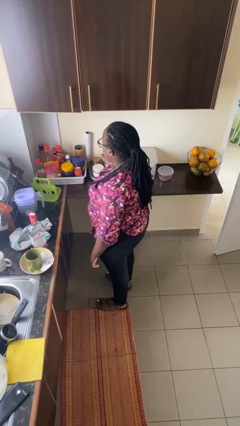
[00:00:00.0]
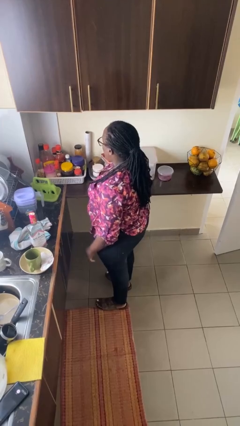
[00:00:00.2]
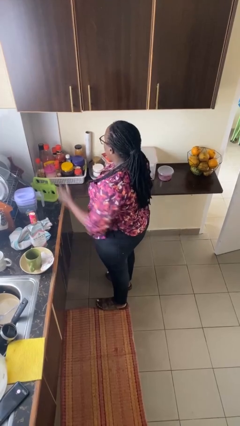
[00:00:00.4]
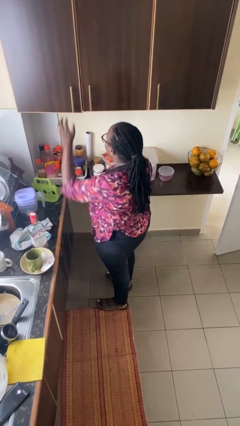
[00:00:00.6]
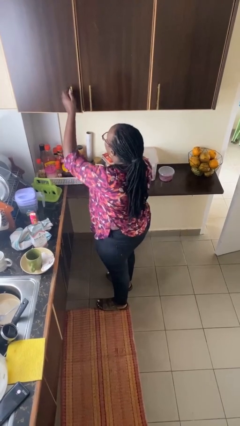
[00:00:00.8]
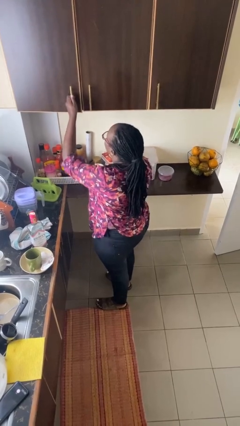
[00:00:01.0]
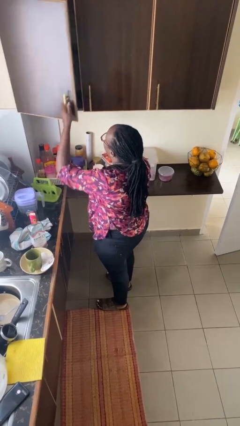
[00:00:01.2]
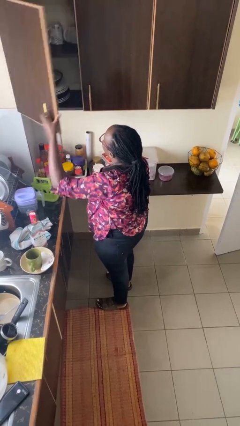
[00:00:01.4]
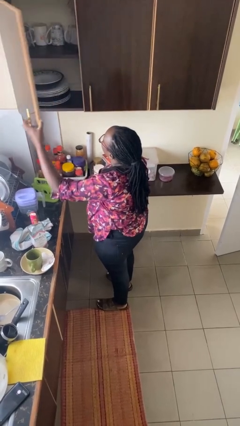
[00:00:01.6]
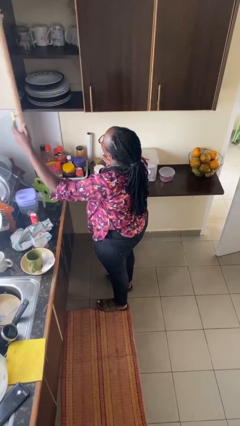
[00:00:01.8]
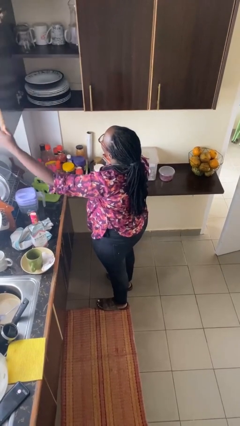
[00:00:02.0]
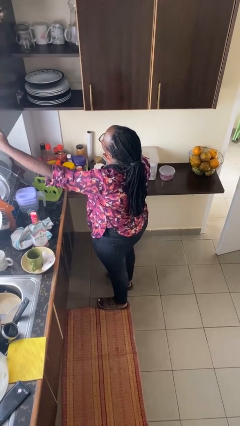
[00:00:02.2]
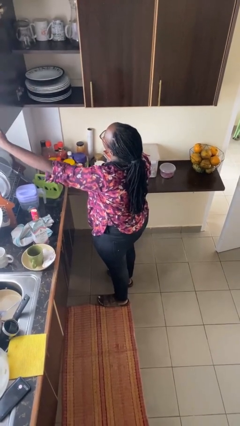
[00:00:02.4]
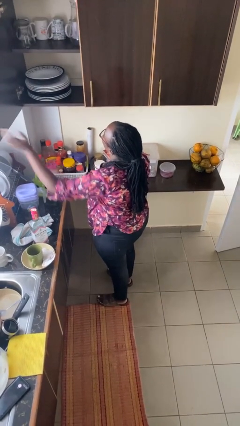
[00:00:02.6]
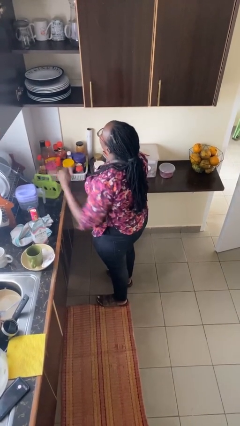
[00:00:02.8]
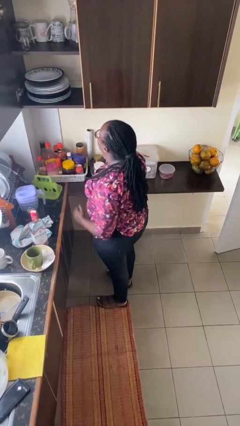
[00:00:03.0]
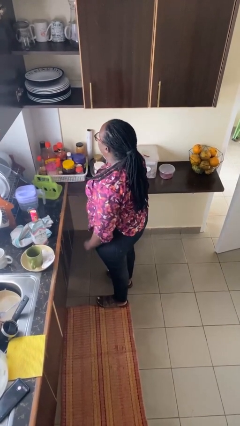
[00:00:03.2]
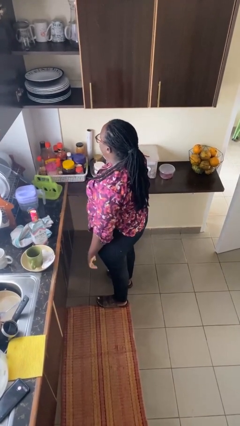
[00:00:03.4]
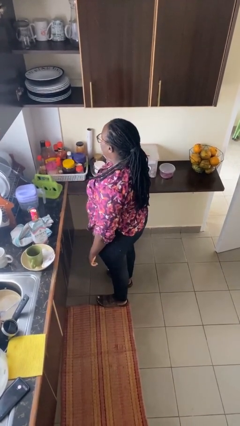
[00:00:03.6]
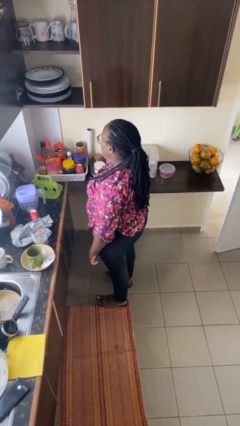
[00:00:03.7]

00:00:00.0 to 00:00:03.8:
person opens cabinet

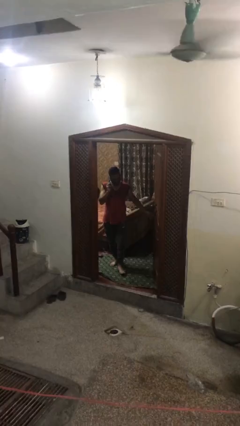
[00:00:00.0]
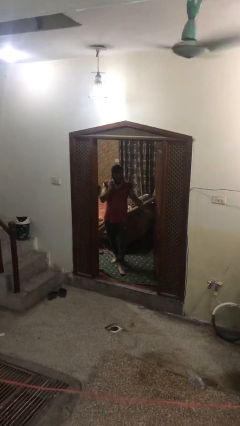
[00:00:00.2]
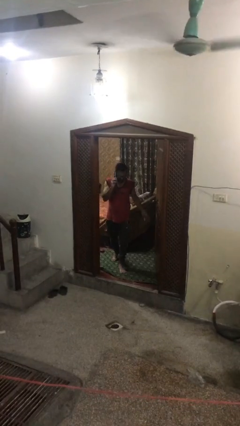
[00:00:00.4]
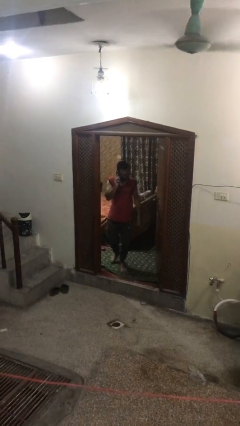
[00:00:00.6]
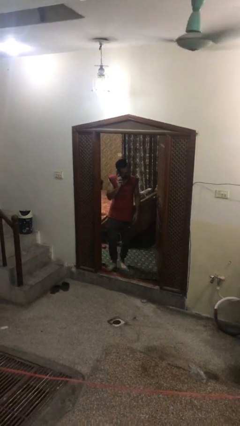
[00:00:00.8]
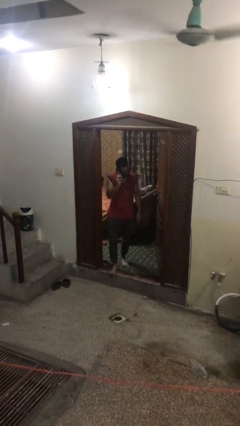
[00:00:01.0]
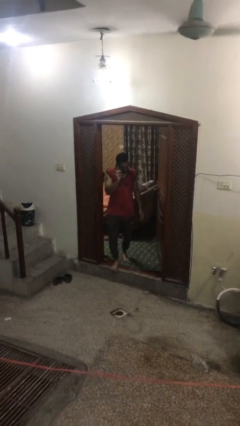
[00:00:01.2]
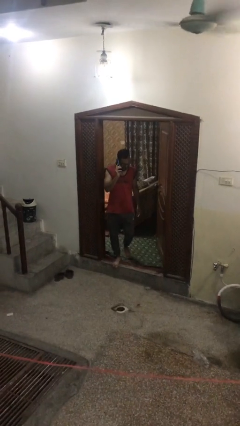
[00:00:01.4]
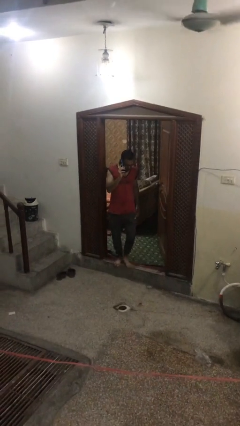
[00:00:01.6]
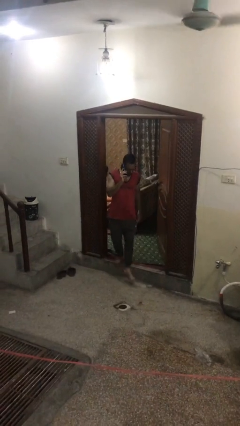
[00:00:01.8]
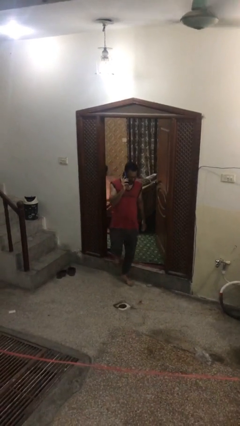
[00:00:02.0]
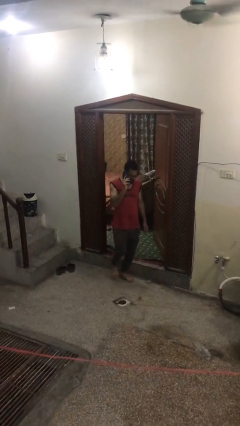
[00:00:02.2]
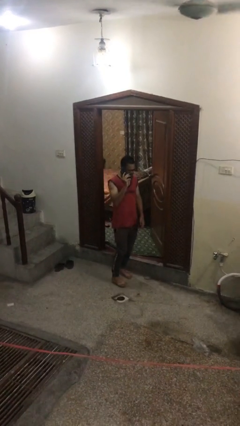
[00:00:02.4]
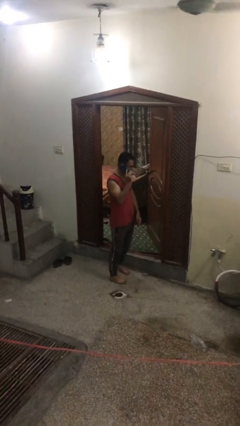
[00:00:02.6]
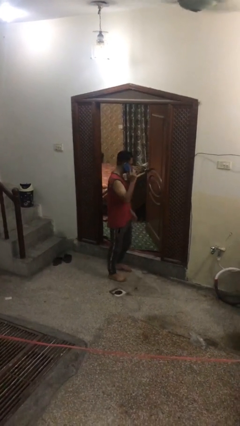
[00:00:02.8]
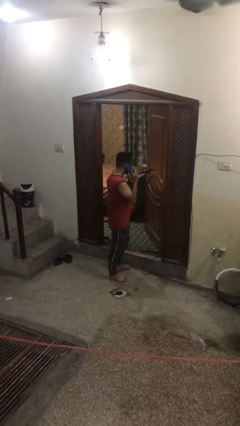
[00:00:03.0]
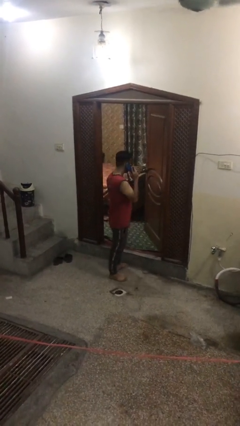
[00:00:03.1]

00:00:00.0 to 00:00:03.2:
person enters scene through structure

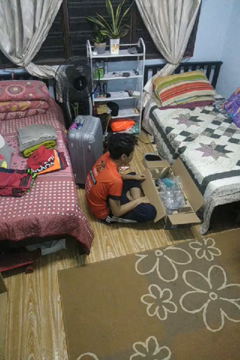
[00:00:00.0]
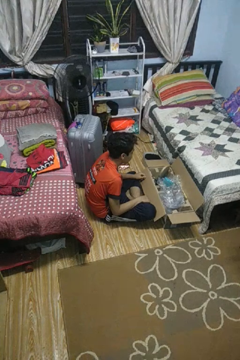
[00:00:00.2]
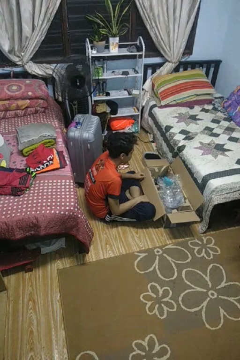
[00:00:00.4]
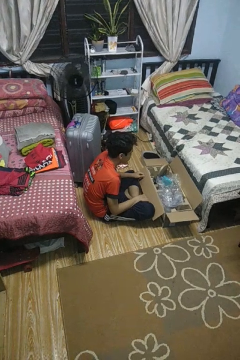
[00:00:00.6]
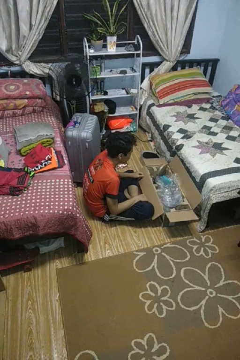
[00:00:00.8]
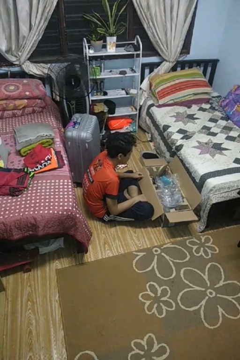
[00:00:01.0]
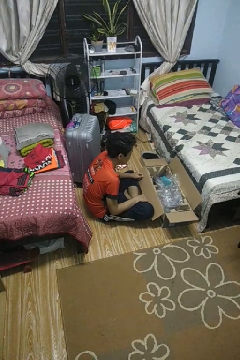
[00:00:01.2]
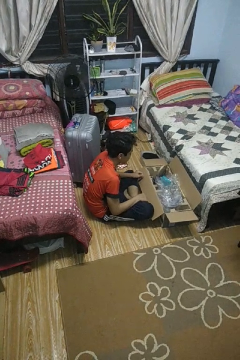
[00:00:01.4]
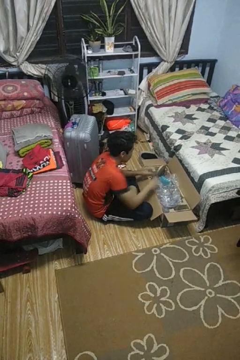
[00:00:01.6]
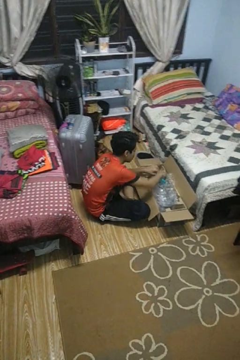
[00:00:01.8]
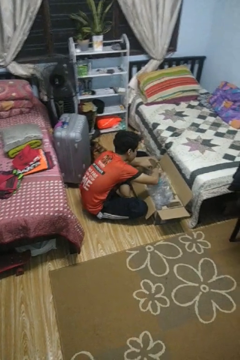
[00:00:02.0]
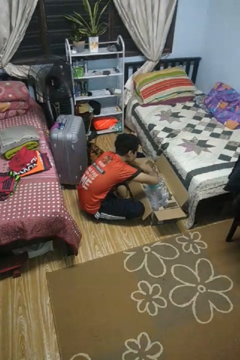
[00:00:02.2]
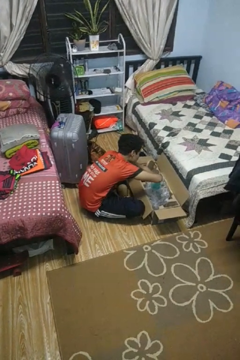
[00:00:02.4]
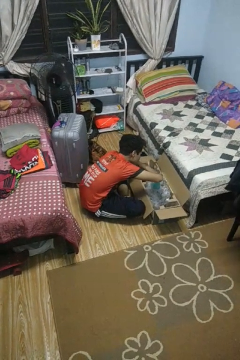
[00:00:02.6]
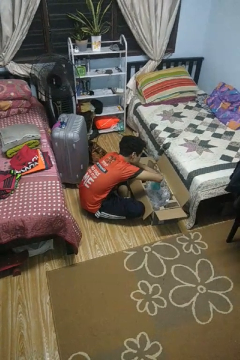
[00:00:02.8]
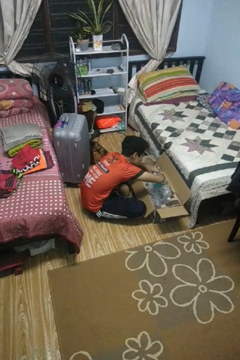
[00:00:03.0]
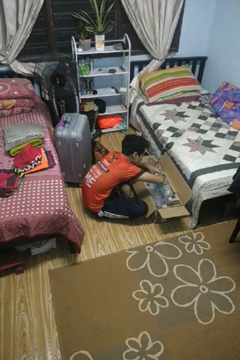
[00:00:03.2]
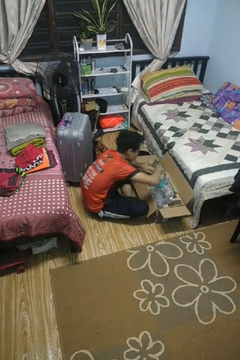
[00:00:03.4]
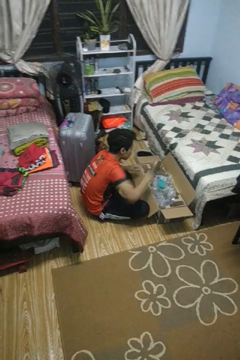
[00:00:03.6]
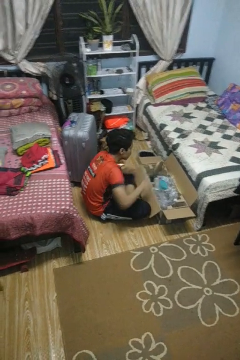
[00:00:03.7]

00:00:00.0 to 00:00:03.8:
person searches in box

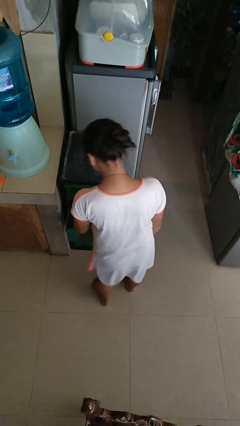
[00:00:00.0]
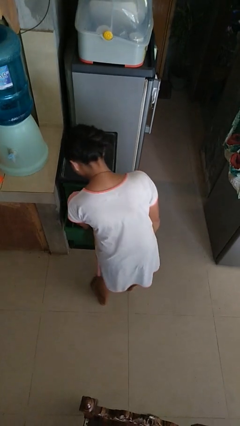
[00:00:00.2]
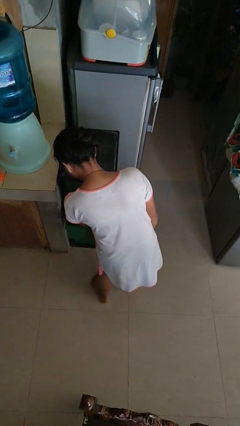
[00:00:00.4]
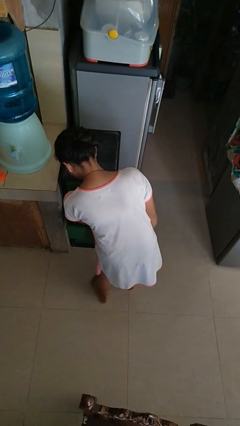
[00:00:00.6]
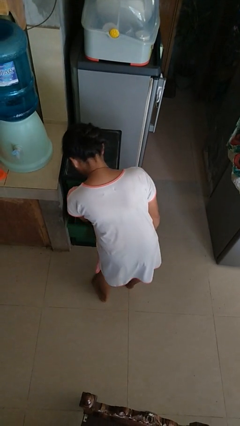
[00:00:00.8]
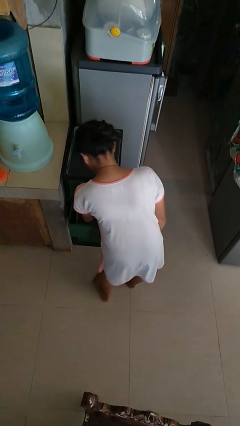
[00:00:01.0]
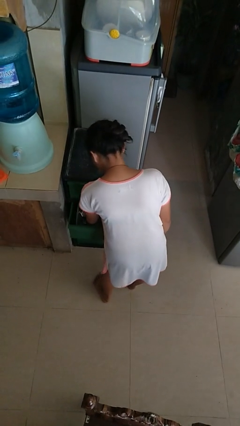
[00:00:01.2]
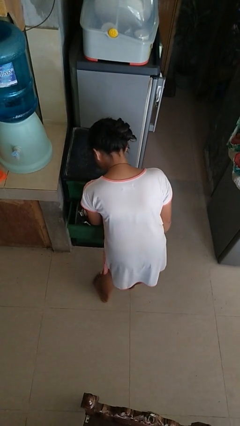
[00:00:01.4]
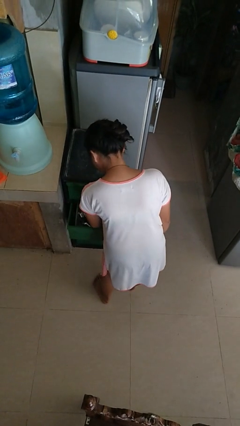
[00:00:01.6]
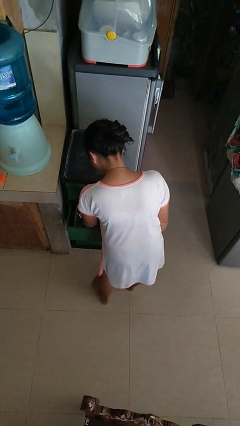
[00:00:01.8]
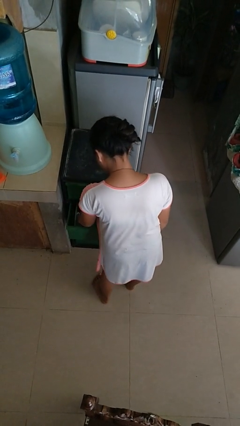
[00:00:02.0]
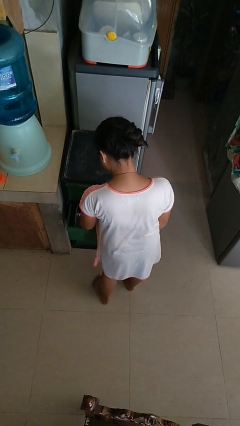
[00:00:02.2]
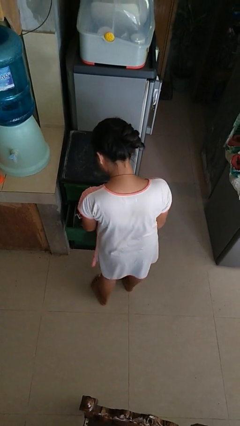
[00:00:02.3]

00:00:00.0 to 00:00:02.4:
person searches in kitchen drawer

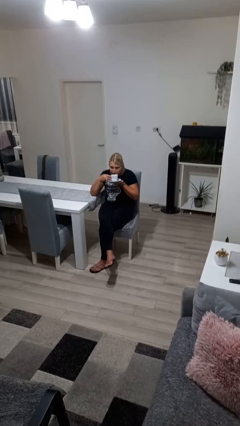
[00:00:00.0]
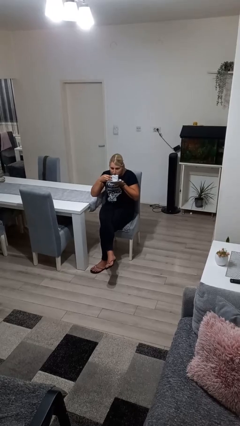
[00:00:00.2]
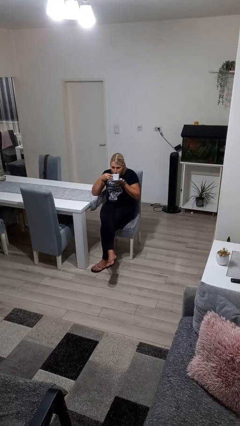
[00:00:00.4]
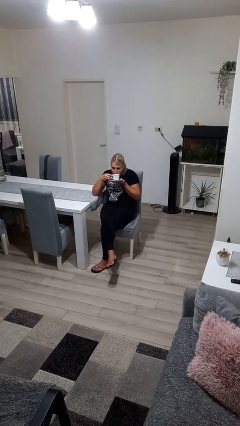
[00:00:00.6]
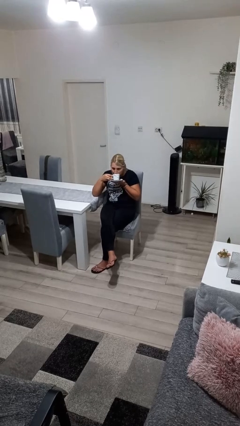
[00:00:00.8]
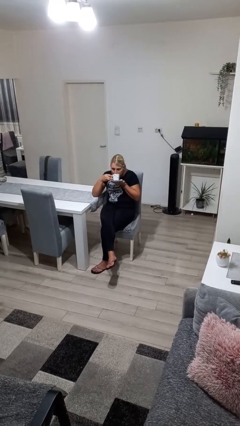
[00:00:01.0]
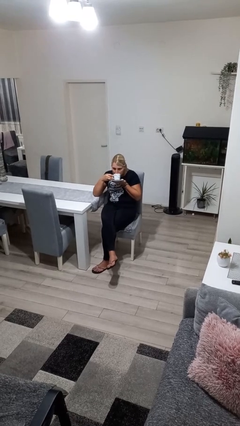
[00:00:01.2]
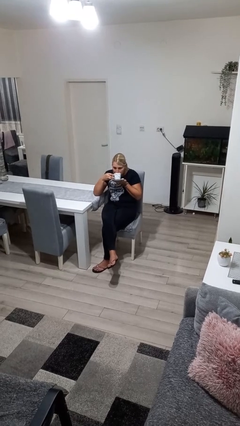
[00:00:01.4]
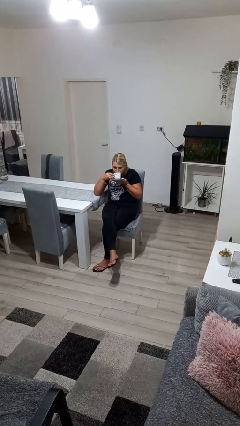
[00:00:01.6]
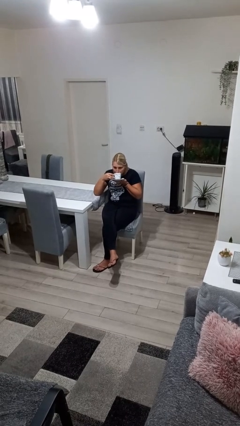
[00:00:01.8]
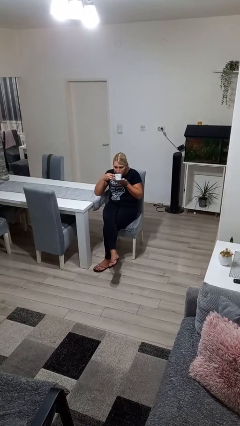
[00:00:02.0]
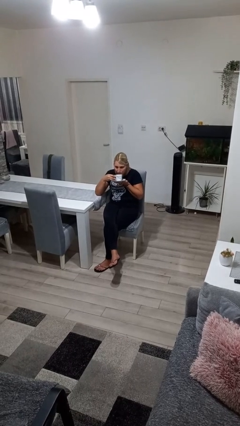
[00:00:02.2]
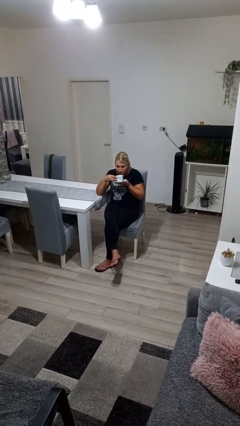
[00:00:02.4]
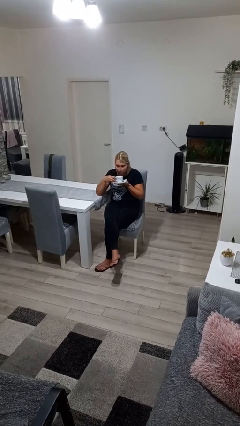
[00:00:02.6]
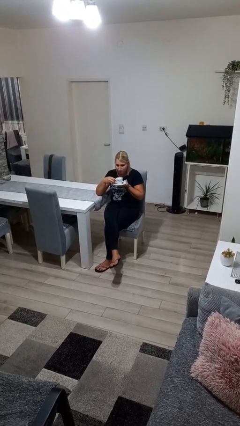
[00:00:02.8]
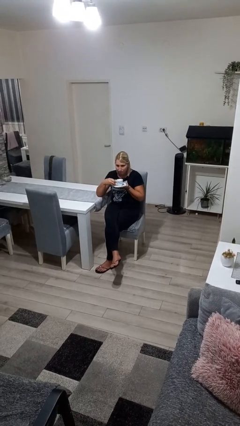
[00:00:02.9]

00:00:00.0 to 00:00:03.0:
person drinks from straw

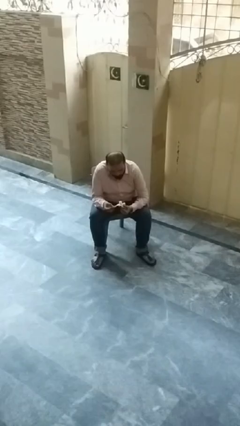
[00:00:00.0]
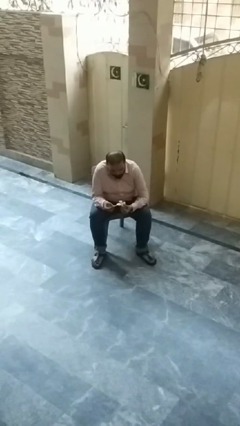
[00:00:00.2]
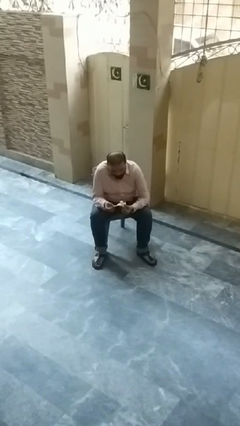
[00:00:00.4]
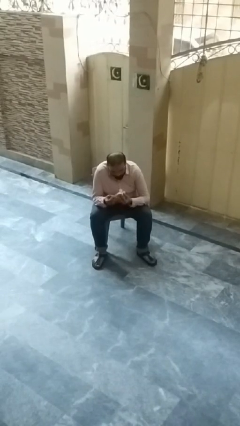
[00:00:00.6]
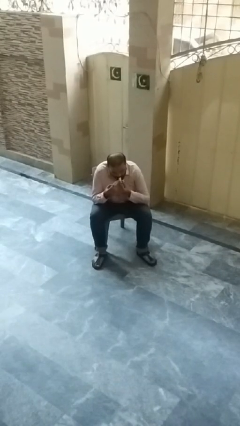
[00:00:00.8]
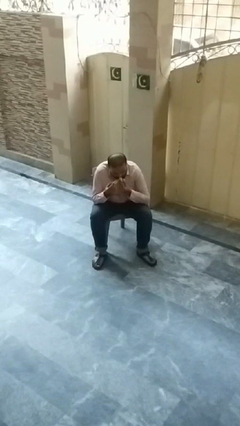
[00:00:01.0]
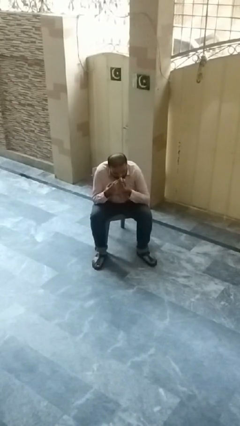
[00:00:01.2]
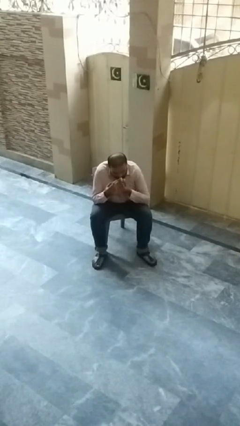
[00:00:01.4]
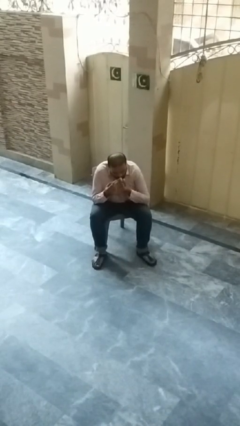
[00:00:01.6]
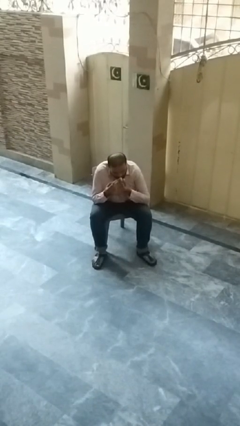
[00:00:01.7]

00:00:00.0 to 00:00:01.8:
person eats banana
